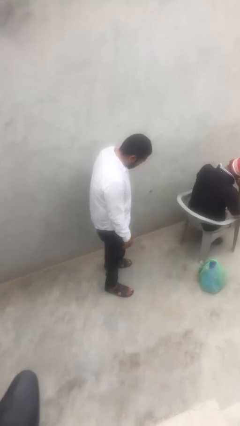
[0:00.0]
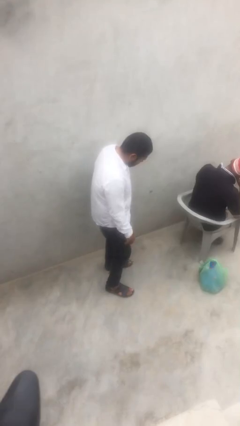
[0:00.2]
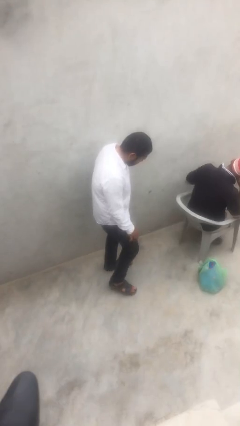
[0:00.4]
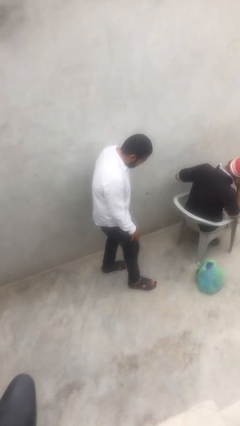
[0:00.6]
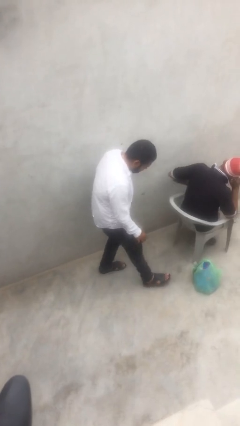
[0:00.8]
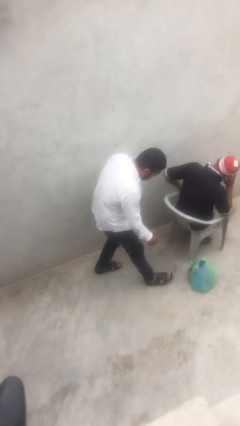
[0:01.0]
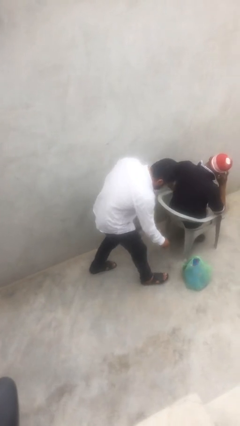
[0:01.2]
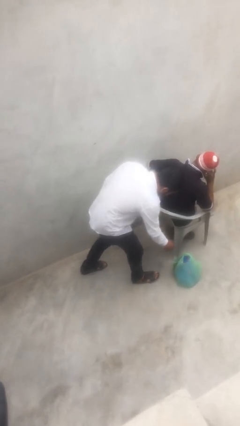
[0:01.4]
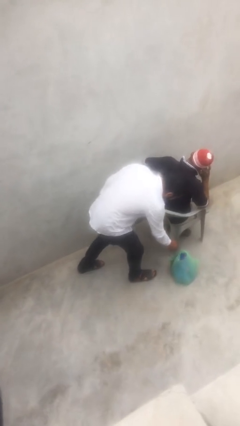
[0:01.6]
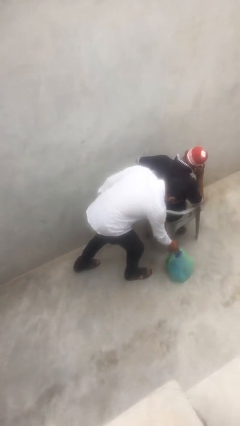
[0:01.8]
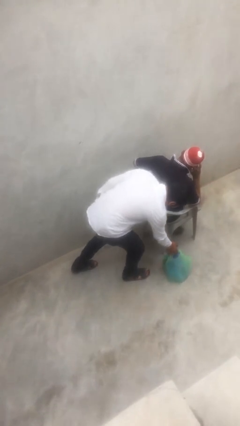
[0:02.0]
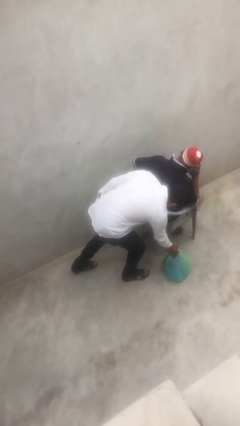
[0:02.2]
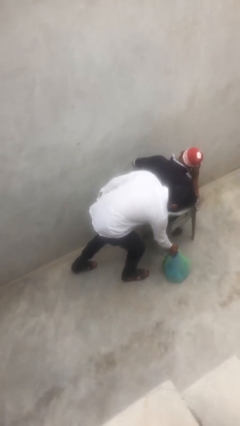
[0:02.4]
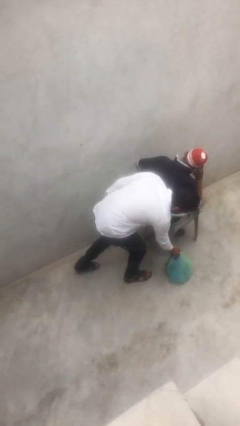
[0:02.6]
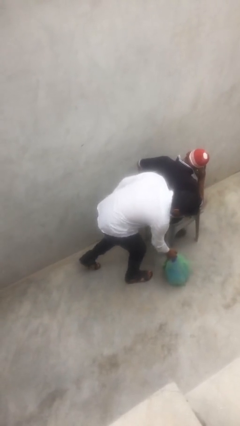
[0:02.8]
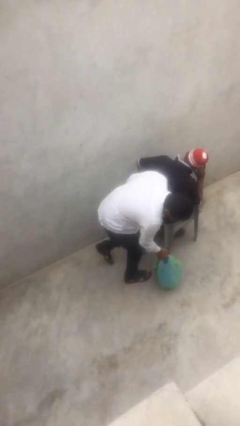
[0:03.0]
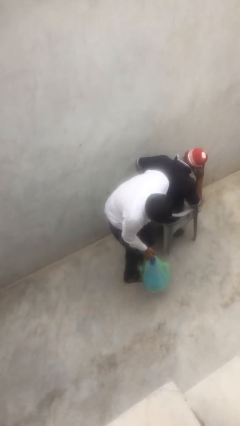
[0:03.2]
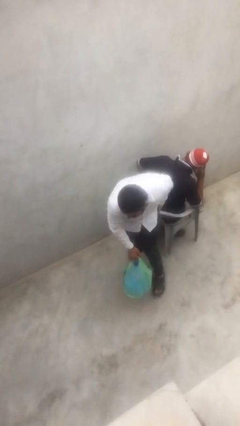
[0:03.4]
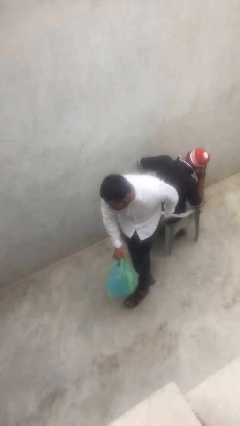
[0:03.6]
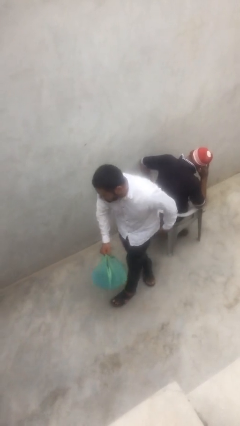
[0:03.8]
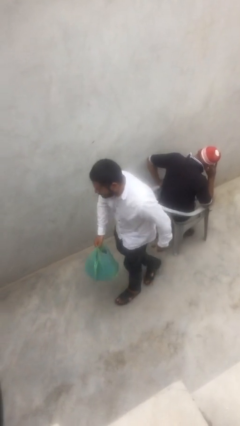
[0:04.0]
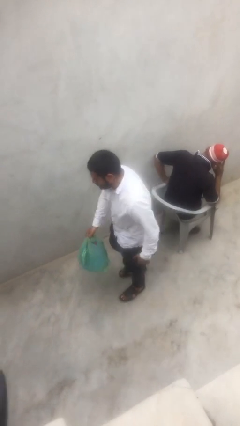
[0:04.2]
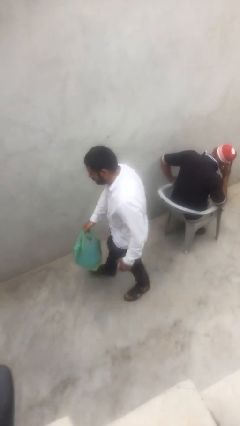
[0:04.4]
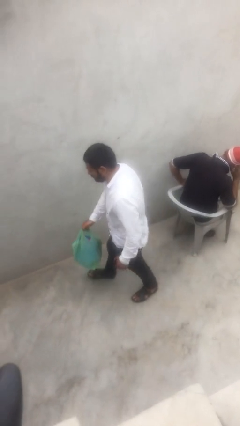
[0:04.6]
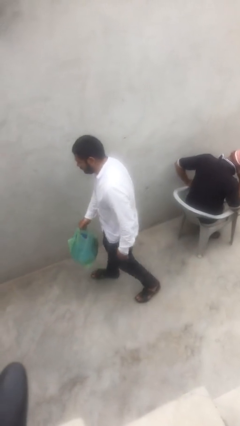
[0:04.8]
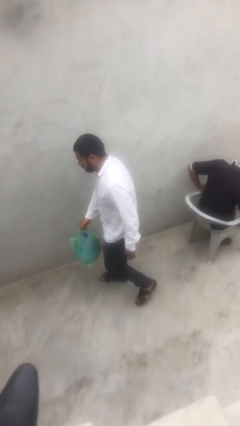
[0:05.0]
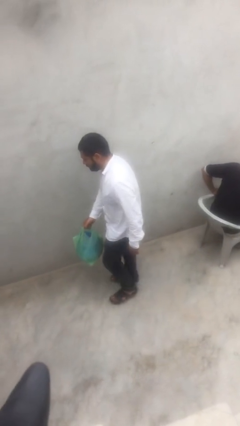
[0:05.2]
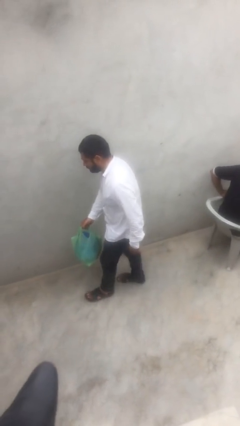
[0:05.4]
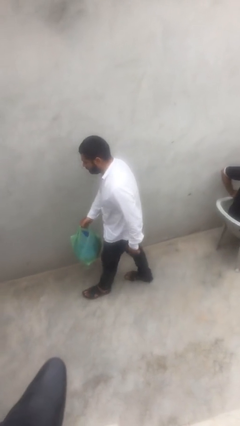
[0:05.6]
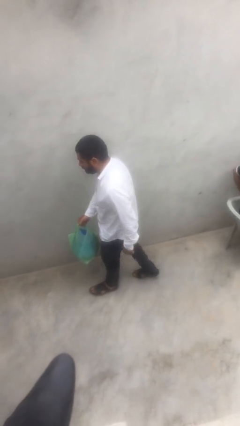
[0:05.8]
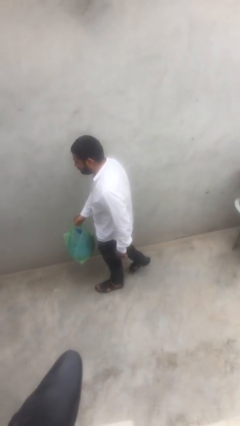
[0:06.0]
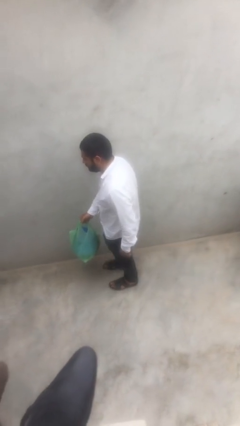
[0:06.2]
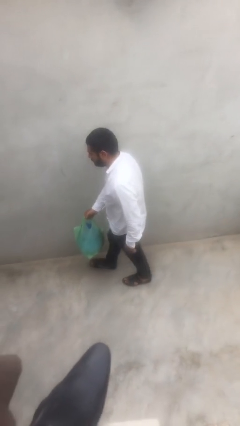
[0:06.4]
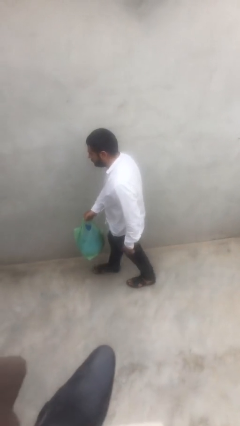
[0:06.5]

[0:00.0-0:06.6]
person steals object from person

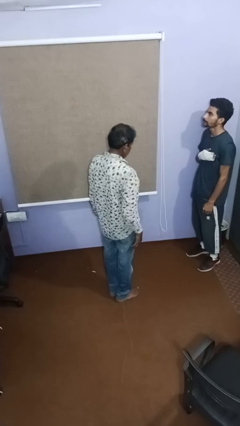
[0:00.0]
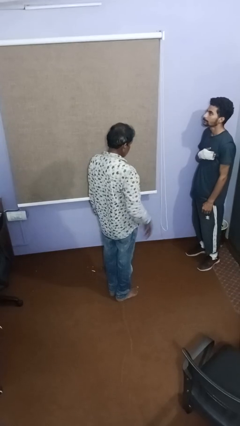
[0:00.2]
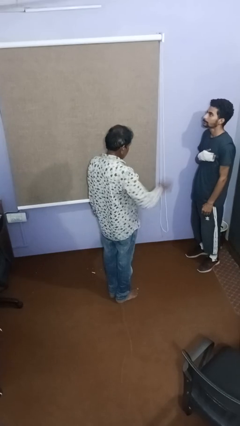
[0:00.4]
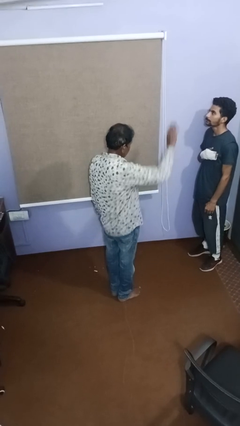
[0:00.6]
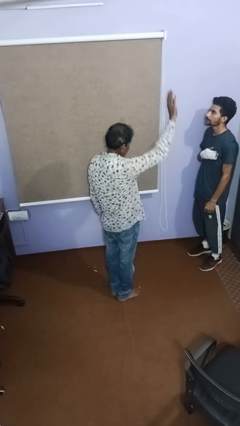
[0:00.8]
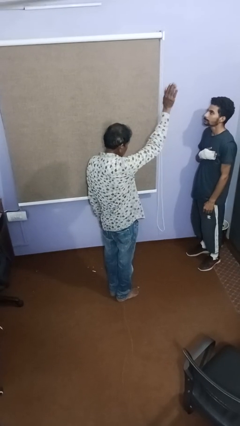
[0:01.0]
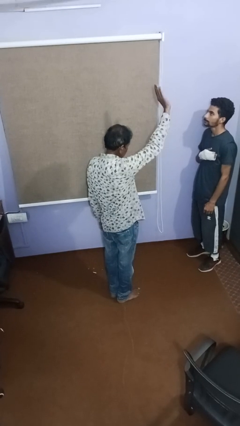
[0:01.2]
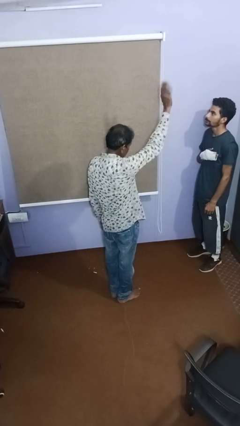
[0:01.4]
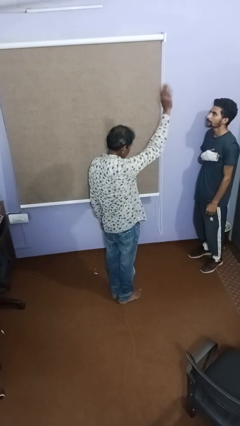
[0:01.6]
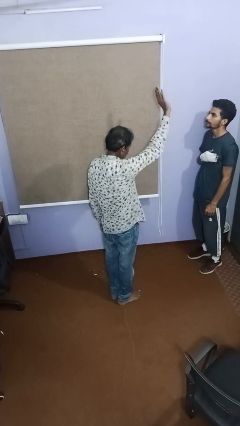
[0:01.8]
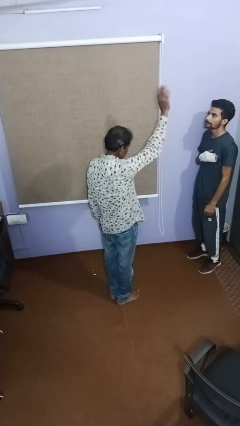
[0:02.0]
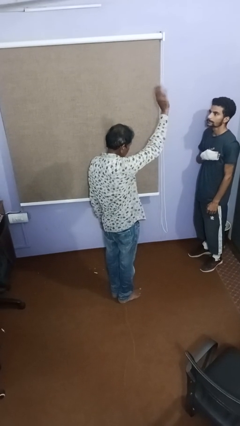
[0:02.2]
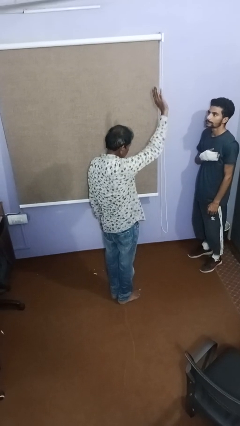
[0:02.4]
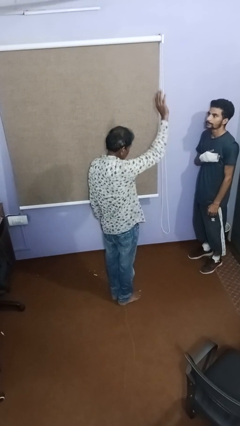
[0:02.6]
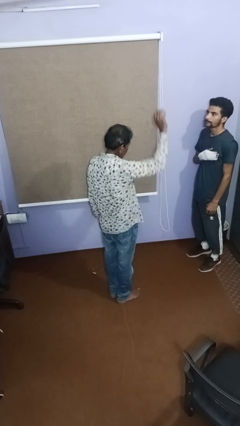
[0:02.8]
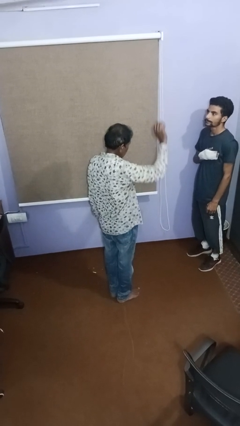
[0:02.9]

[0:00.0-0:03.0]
person waves at person

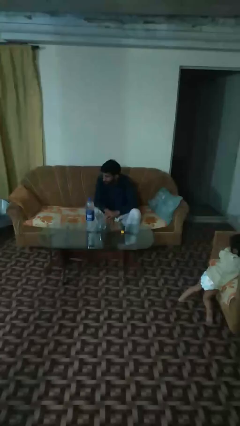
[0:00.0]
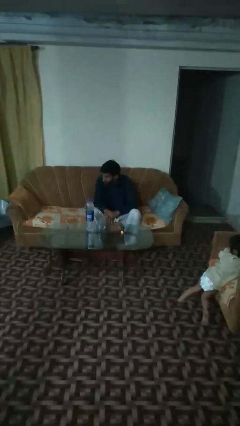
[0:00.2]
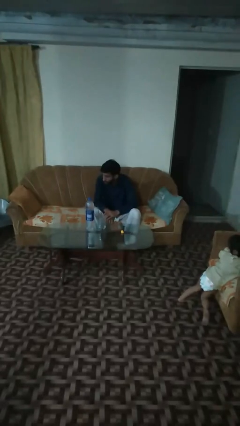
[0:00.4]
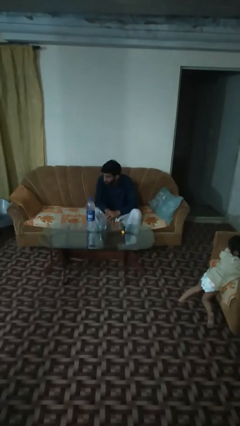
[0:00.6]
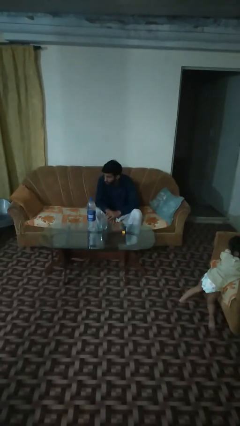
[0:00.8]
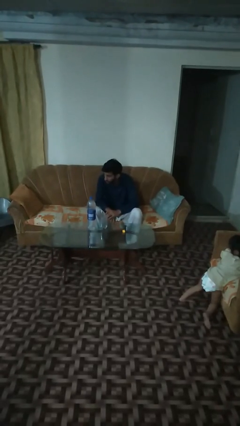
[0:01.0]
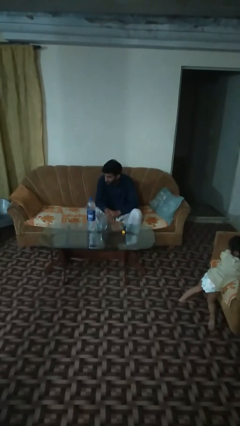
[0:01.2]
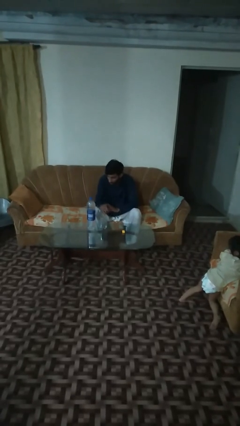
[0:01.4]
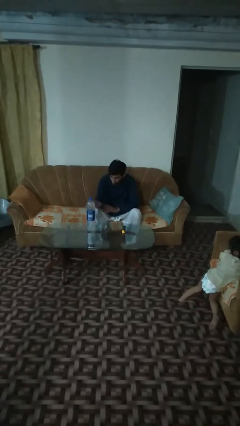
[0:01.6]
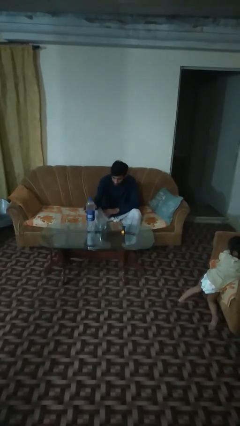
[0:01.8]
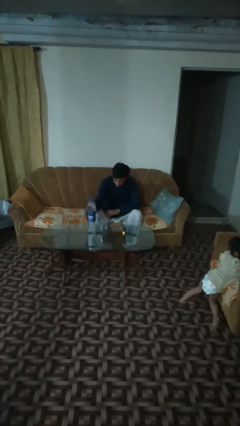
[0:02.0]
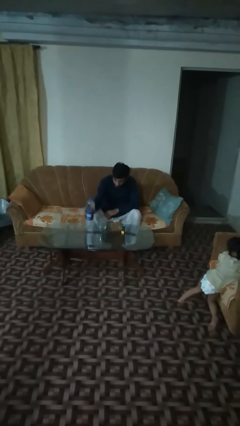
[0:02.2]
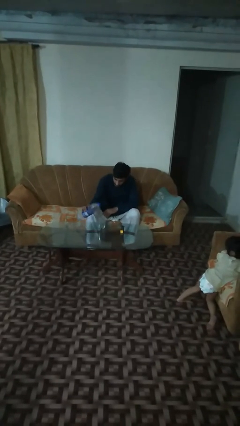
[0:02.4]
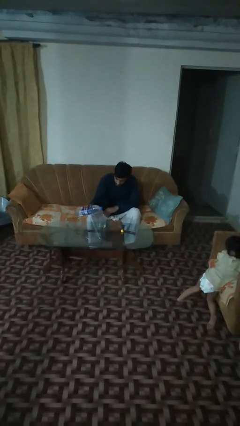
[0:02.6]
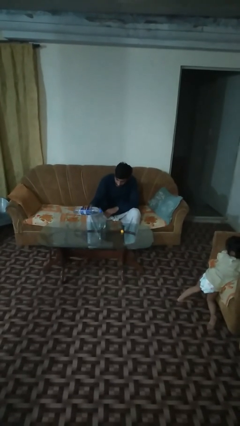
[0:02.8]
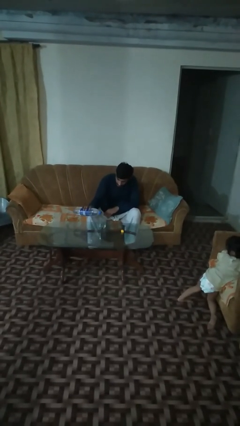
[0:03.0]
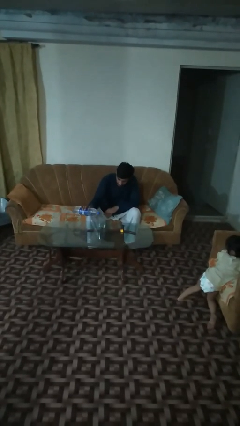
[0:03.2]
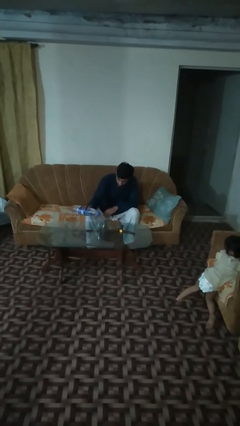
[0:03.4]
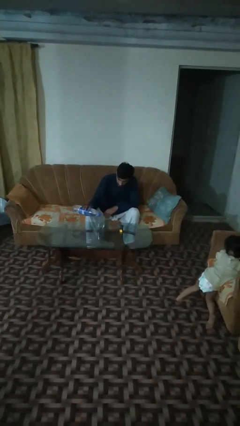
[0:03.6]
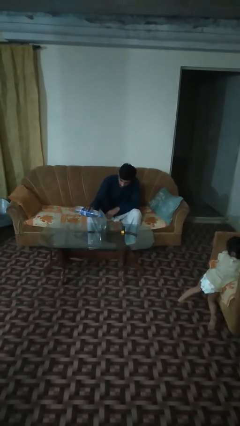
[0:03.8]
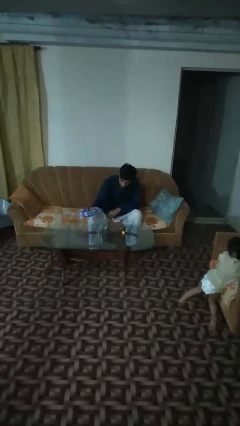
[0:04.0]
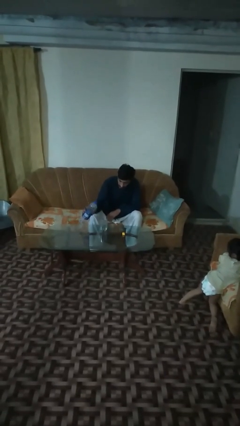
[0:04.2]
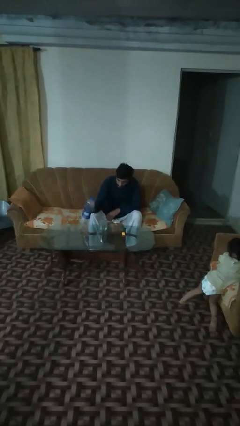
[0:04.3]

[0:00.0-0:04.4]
person pours liquid into cup

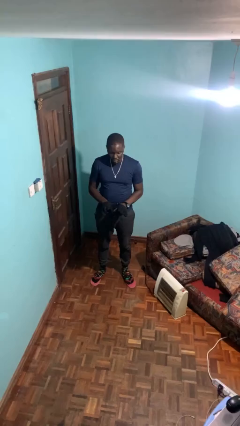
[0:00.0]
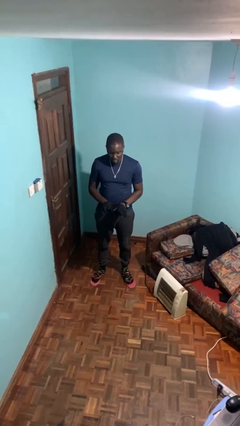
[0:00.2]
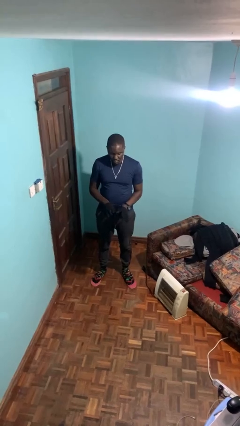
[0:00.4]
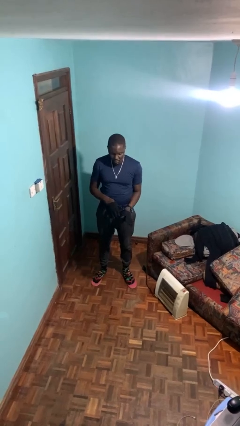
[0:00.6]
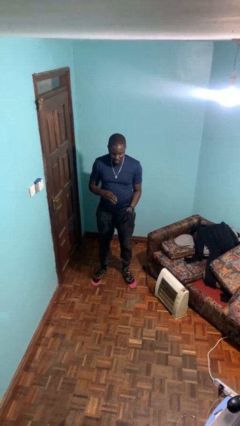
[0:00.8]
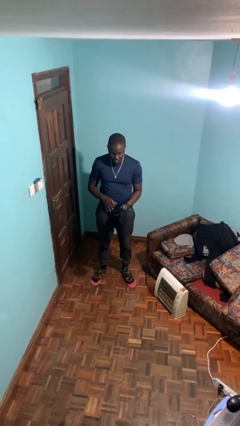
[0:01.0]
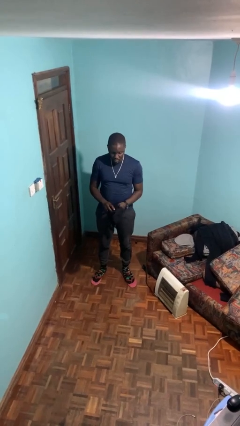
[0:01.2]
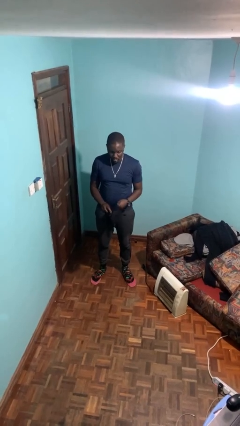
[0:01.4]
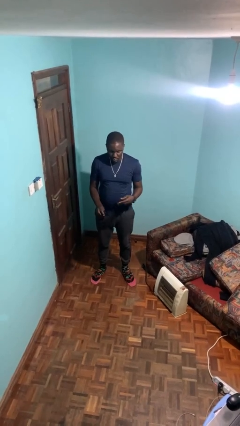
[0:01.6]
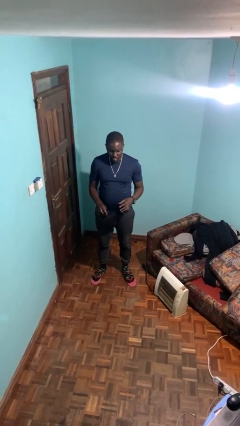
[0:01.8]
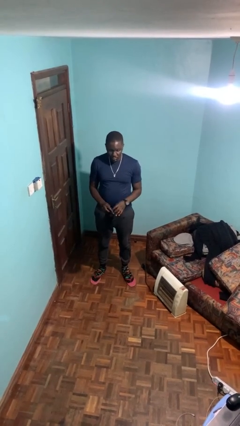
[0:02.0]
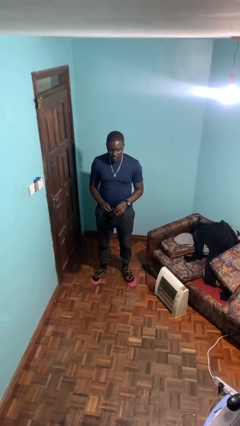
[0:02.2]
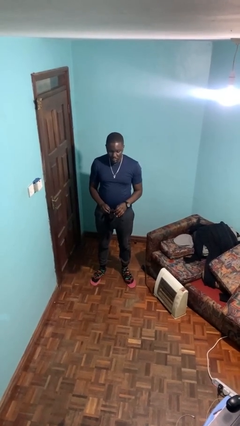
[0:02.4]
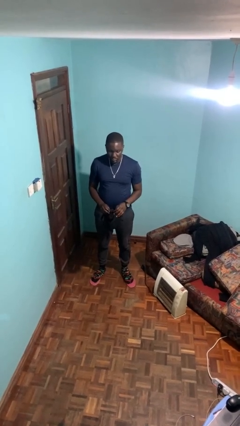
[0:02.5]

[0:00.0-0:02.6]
person takes off gloves

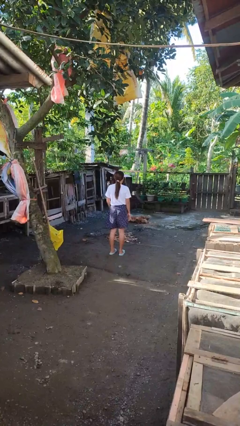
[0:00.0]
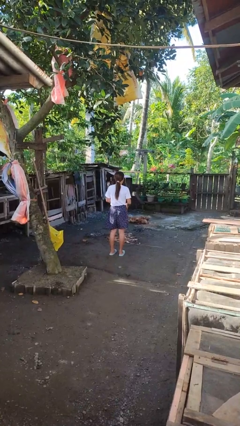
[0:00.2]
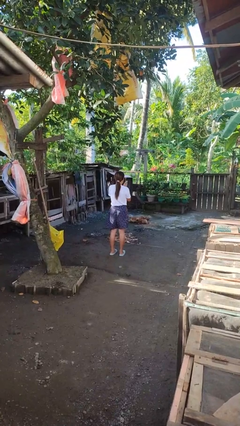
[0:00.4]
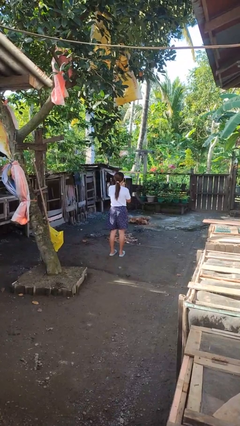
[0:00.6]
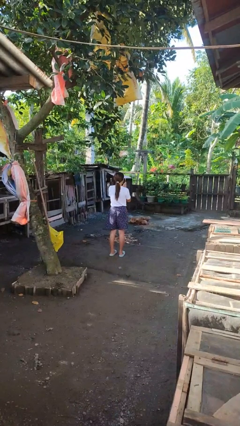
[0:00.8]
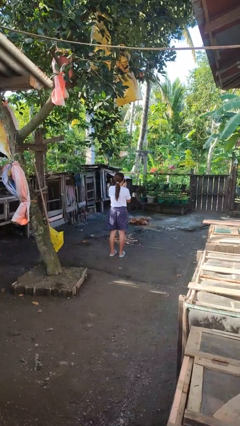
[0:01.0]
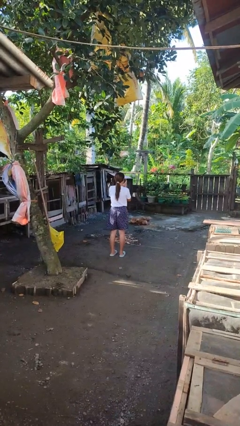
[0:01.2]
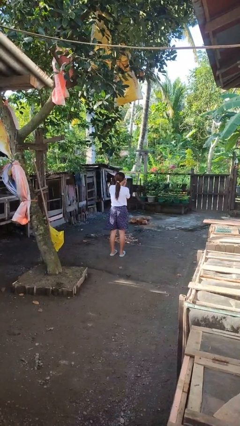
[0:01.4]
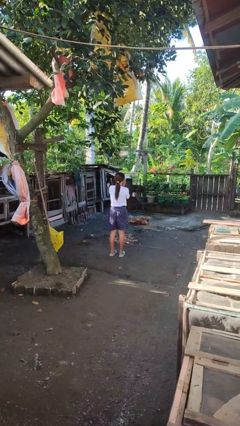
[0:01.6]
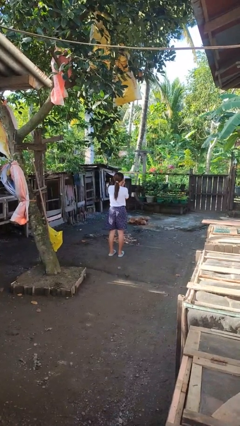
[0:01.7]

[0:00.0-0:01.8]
person blows into hands
